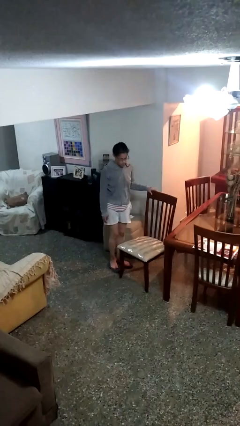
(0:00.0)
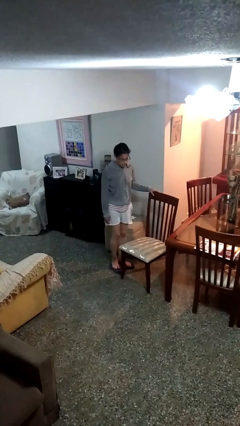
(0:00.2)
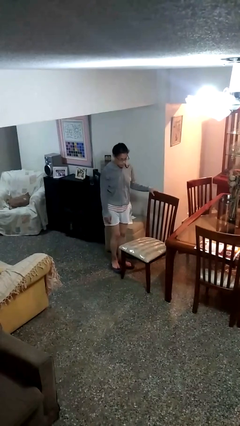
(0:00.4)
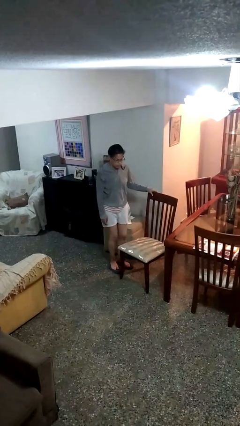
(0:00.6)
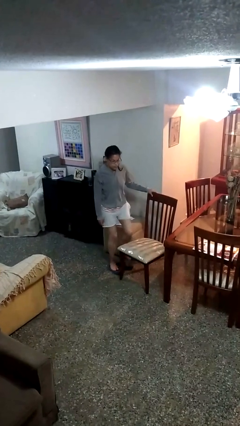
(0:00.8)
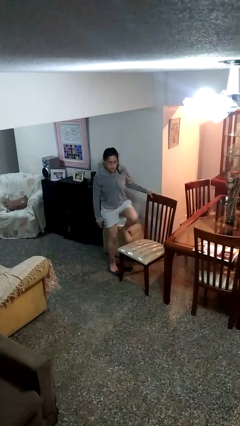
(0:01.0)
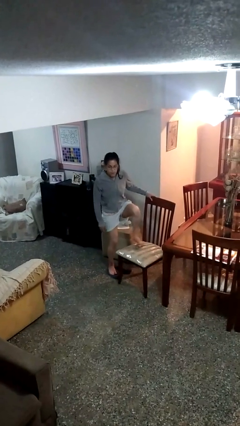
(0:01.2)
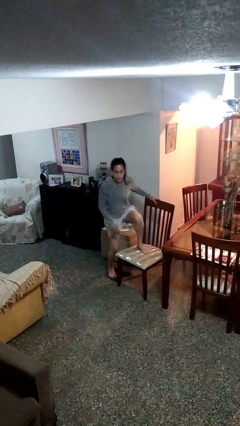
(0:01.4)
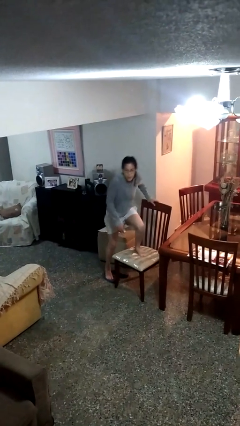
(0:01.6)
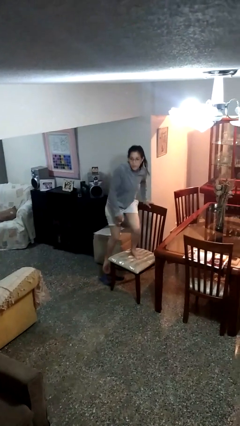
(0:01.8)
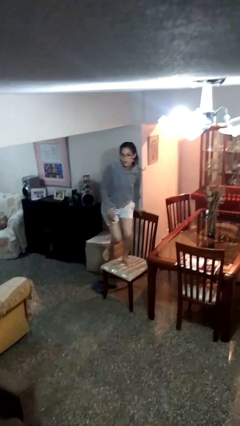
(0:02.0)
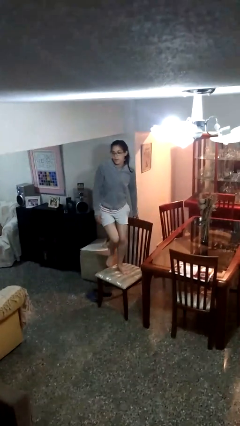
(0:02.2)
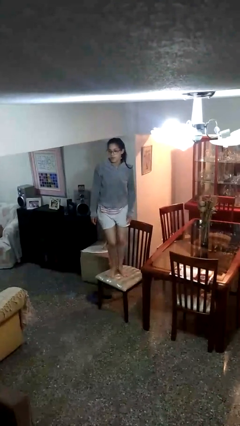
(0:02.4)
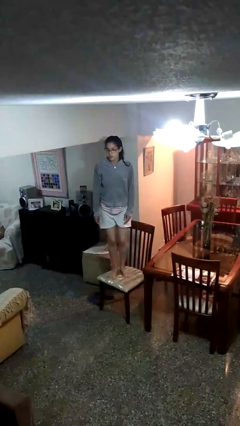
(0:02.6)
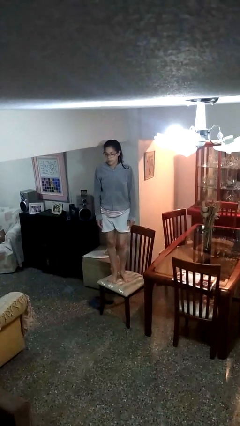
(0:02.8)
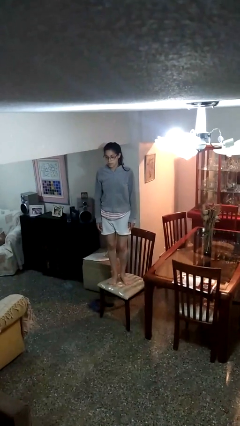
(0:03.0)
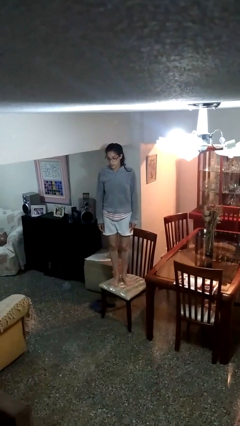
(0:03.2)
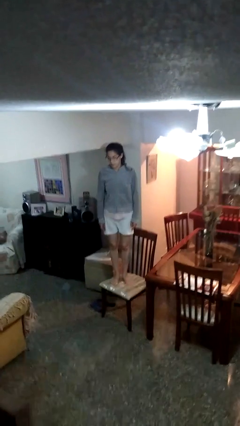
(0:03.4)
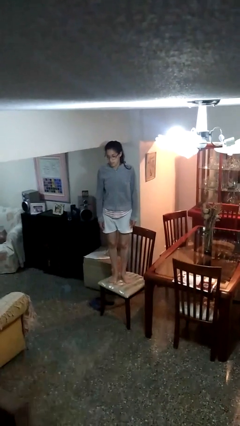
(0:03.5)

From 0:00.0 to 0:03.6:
person climbs on chair

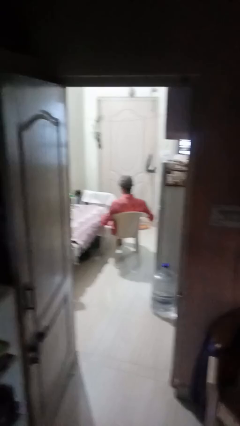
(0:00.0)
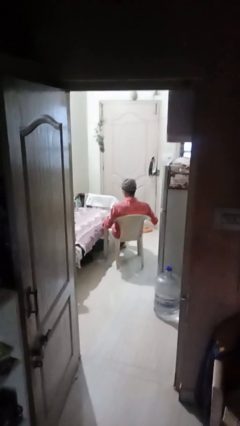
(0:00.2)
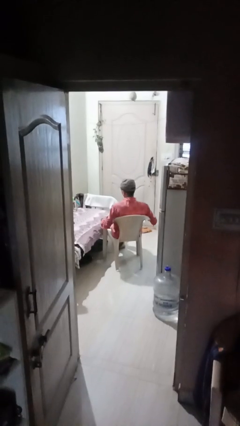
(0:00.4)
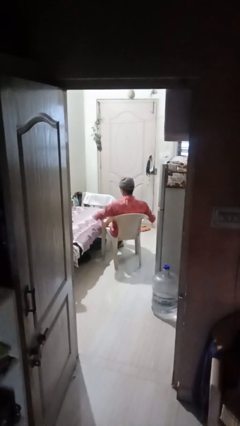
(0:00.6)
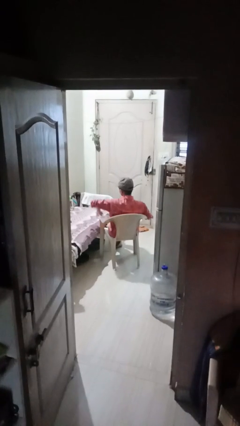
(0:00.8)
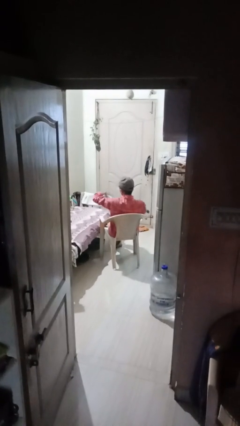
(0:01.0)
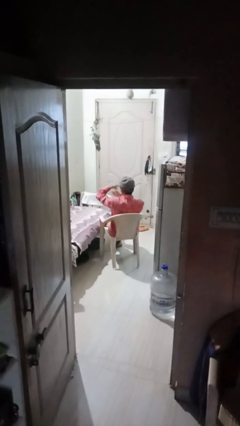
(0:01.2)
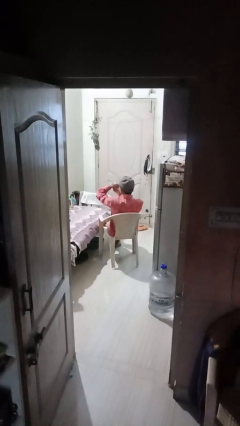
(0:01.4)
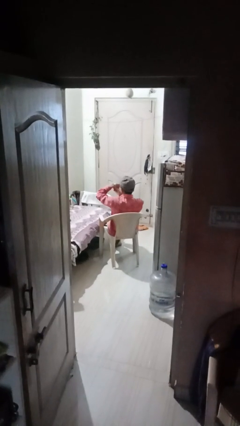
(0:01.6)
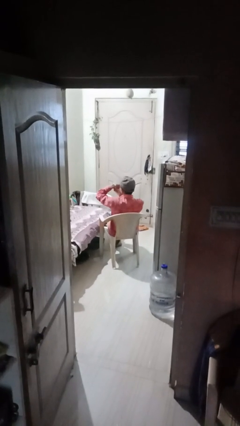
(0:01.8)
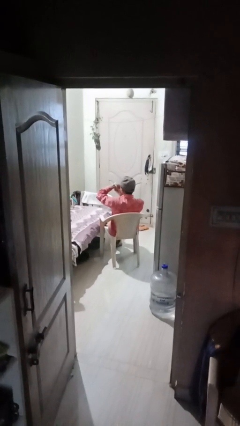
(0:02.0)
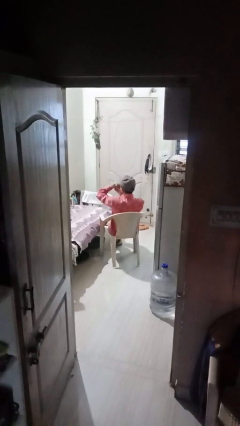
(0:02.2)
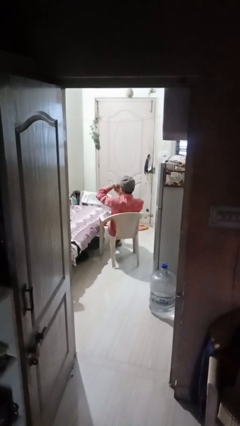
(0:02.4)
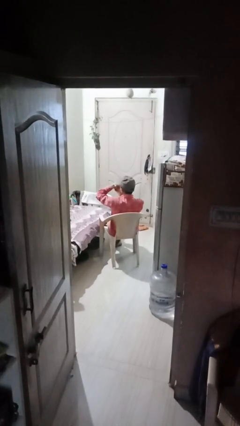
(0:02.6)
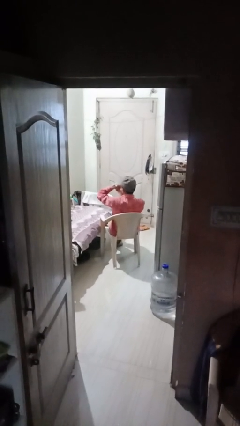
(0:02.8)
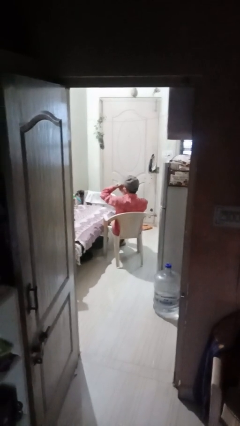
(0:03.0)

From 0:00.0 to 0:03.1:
person looks at wristwatch

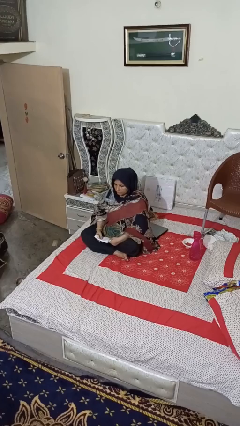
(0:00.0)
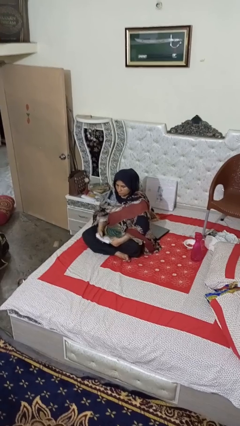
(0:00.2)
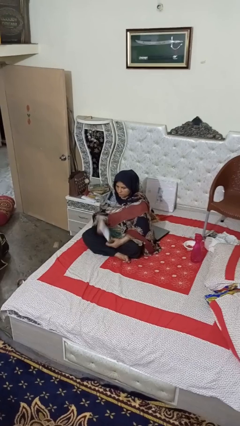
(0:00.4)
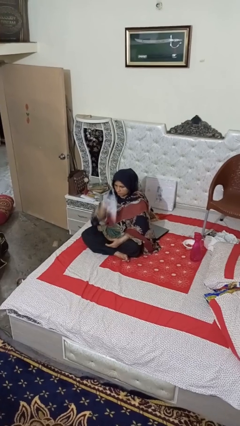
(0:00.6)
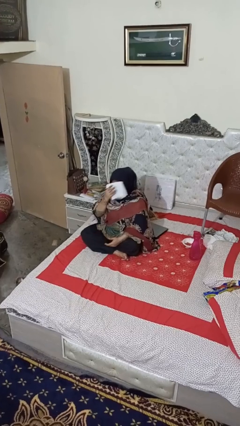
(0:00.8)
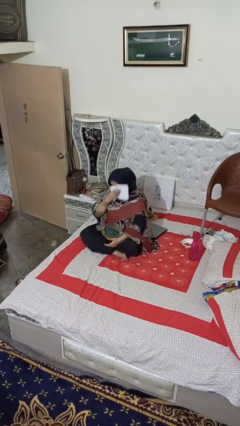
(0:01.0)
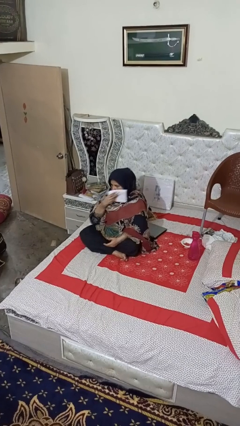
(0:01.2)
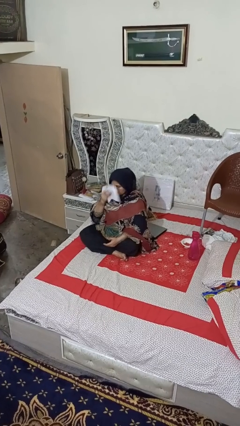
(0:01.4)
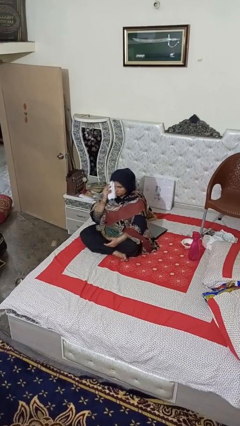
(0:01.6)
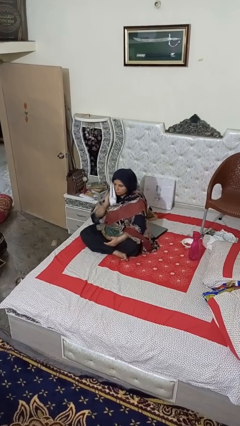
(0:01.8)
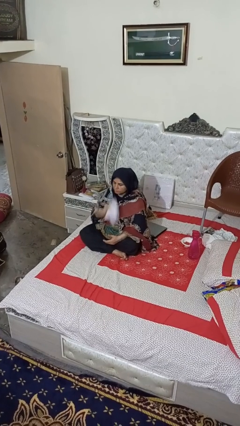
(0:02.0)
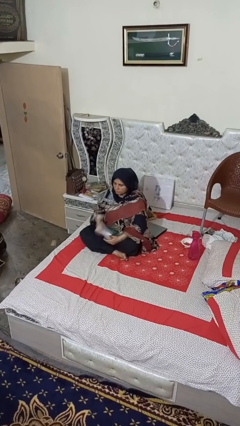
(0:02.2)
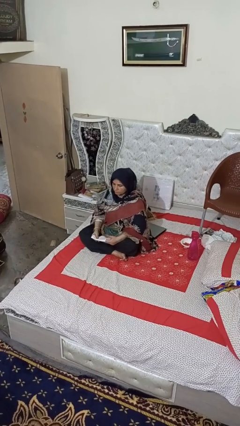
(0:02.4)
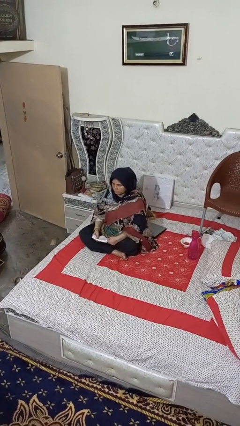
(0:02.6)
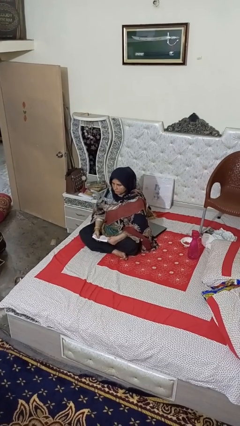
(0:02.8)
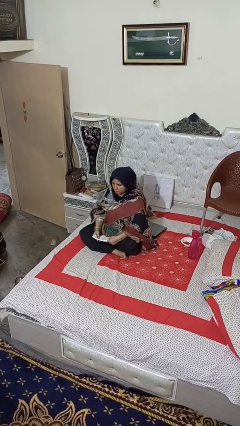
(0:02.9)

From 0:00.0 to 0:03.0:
person wipes mouth with napkin

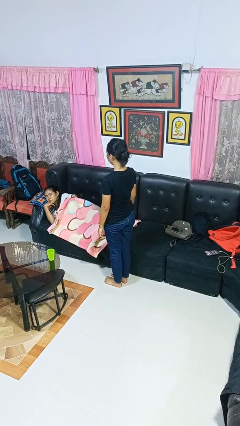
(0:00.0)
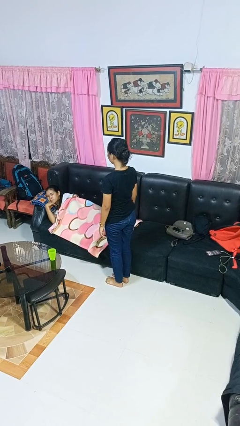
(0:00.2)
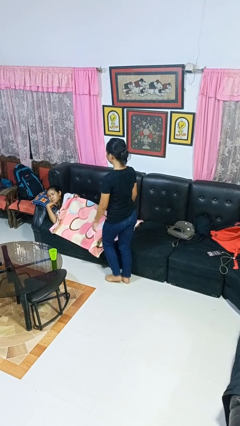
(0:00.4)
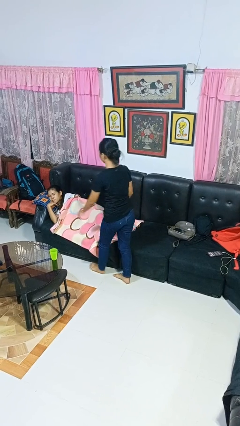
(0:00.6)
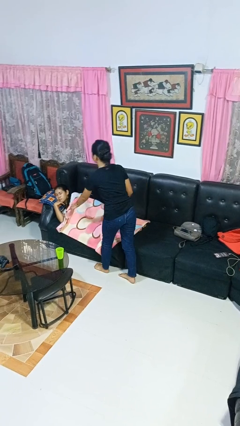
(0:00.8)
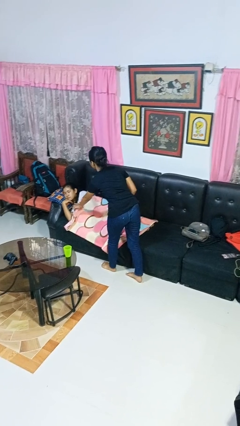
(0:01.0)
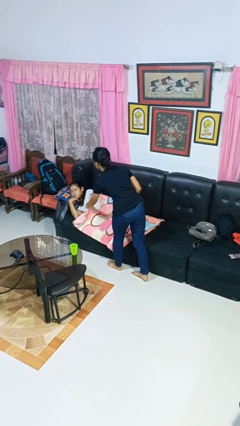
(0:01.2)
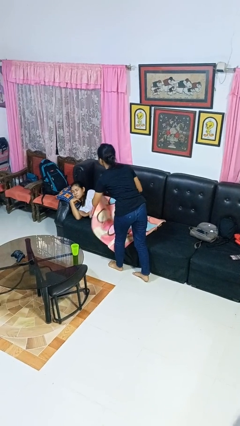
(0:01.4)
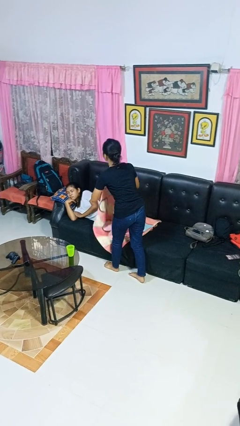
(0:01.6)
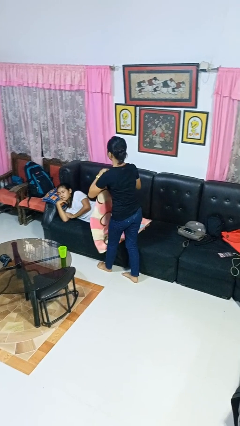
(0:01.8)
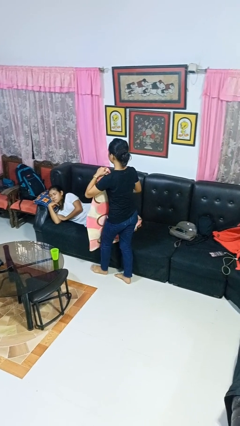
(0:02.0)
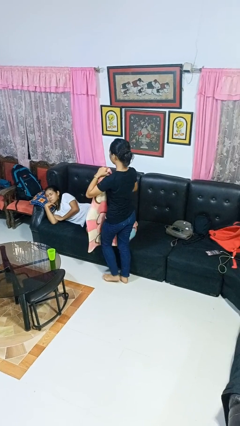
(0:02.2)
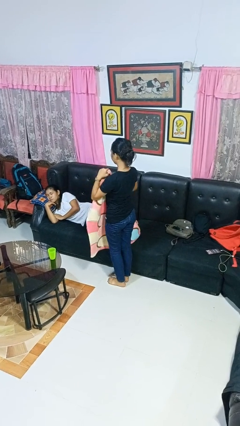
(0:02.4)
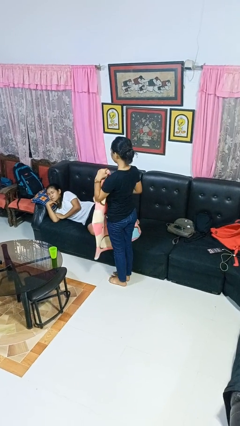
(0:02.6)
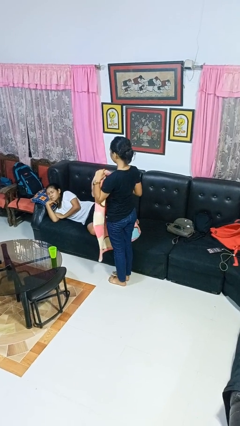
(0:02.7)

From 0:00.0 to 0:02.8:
person uncovers friend with blanket

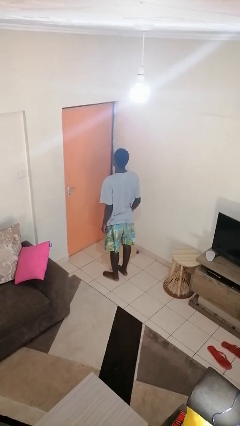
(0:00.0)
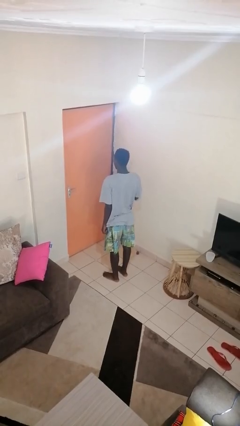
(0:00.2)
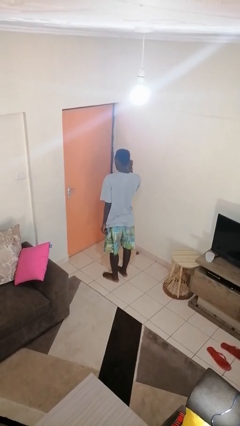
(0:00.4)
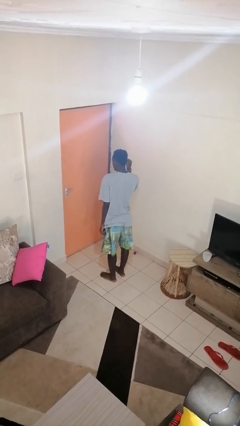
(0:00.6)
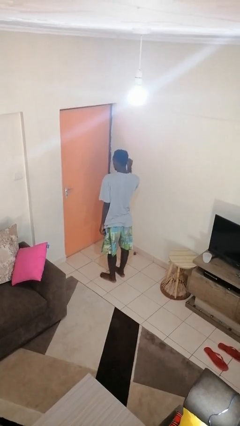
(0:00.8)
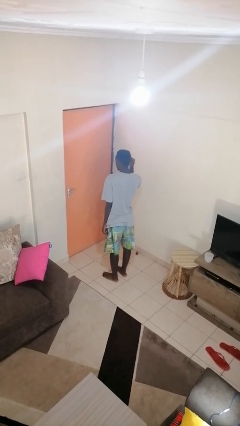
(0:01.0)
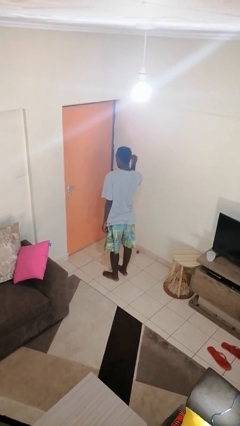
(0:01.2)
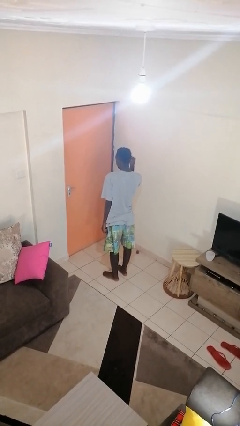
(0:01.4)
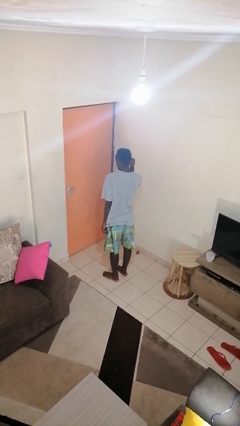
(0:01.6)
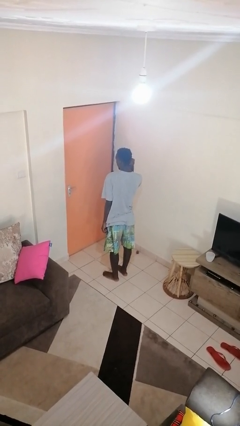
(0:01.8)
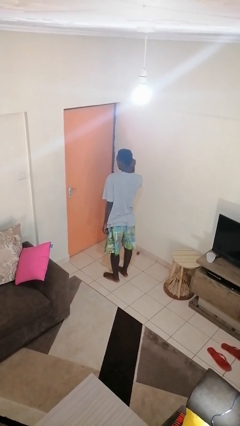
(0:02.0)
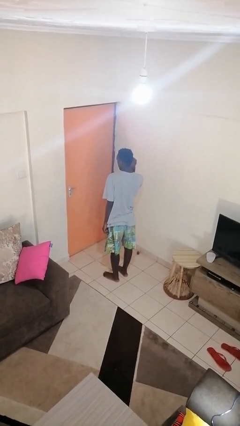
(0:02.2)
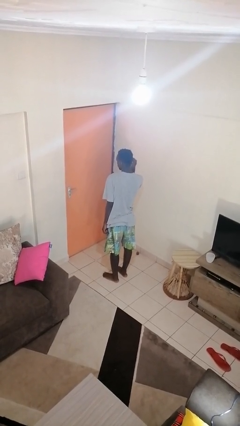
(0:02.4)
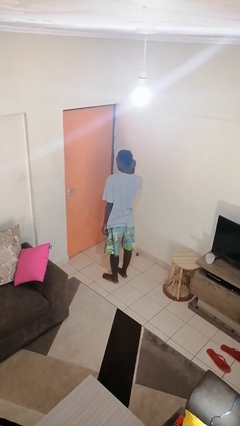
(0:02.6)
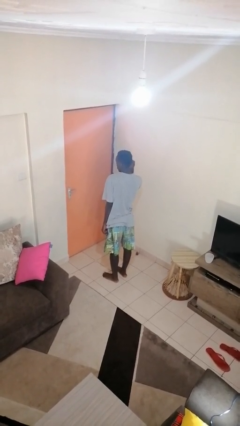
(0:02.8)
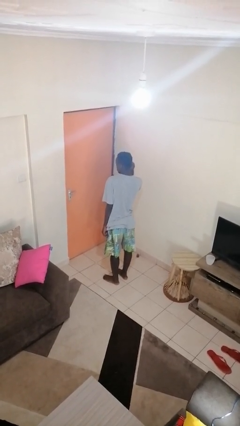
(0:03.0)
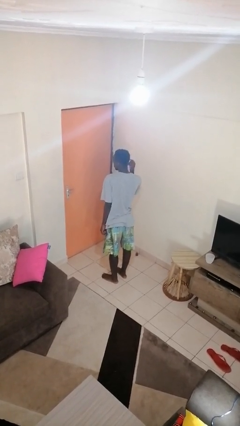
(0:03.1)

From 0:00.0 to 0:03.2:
person gestures listen closely

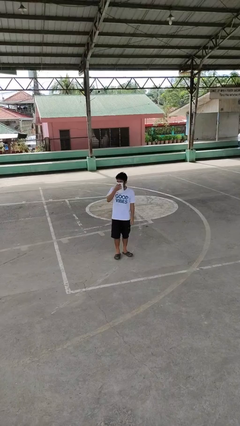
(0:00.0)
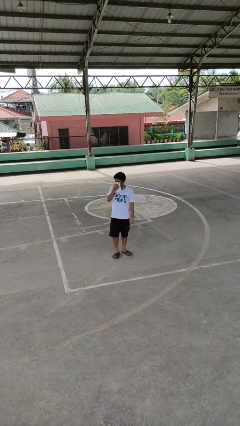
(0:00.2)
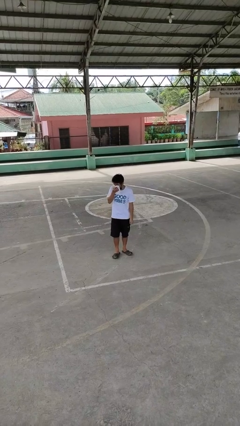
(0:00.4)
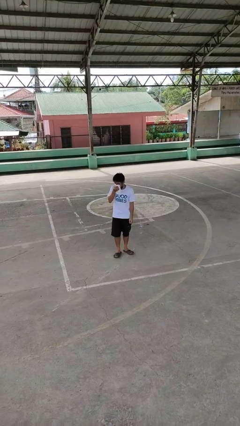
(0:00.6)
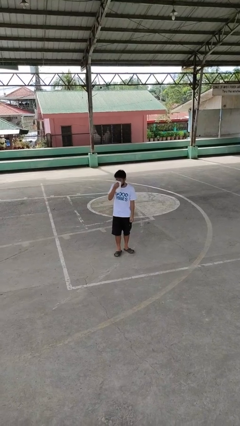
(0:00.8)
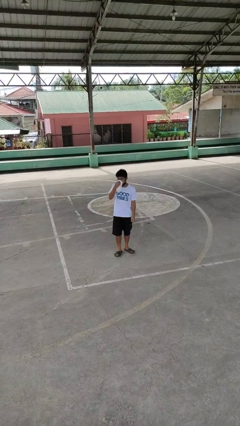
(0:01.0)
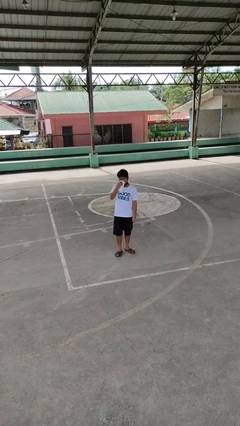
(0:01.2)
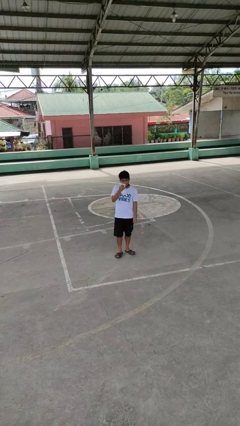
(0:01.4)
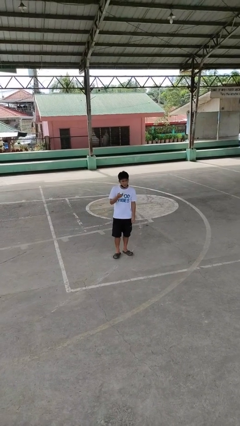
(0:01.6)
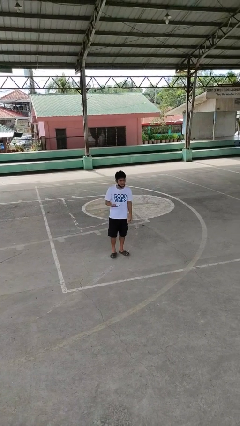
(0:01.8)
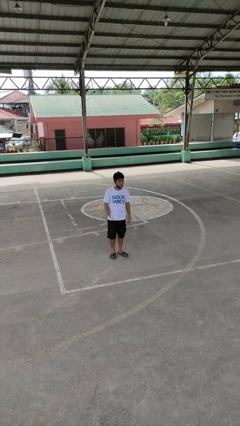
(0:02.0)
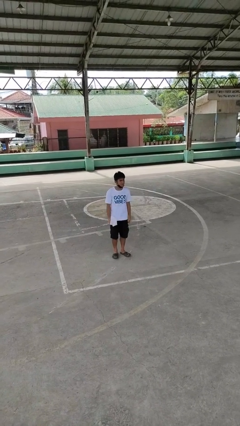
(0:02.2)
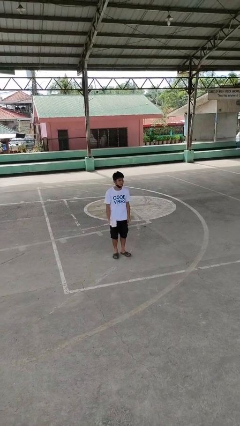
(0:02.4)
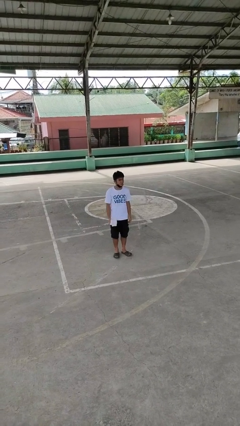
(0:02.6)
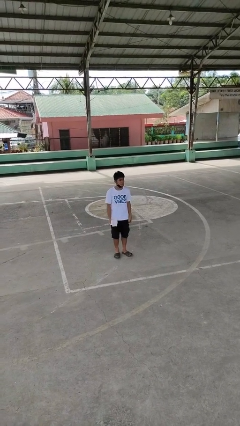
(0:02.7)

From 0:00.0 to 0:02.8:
person holds object above head
